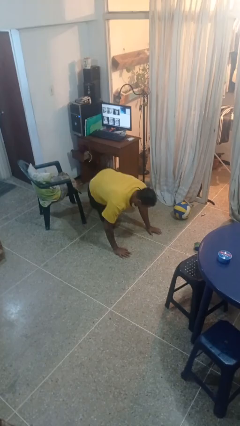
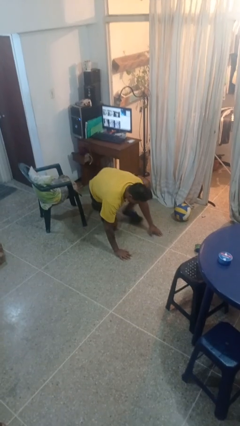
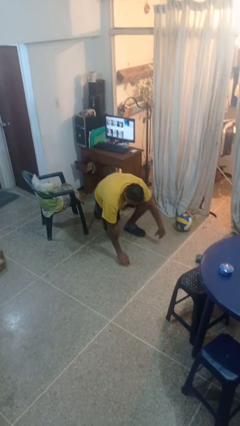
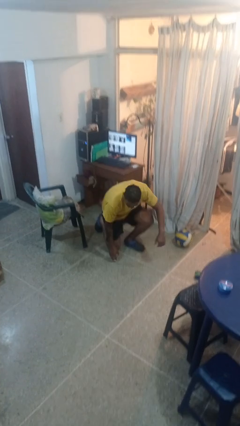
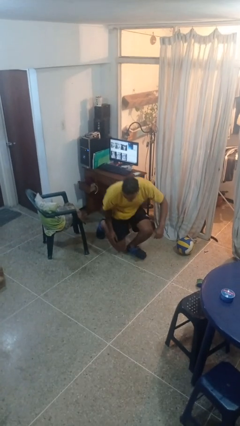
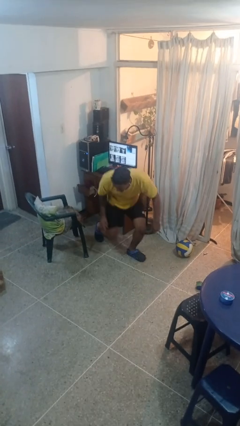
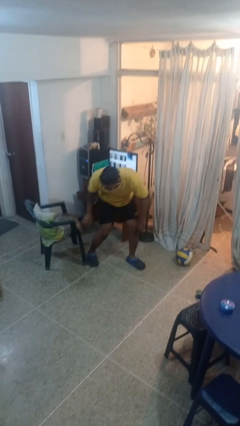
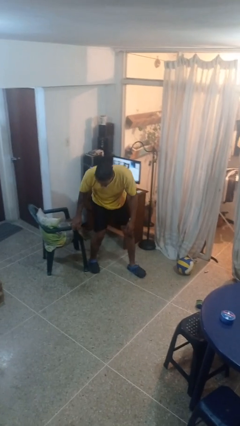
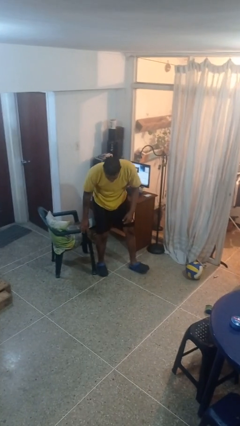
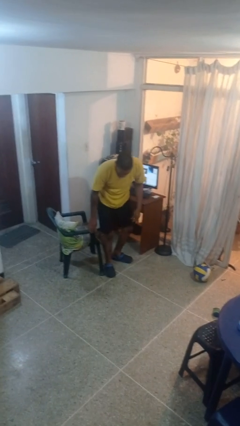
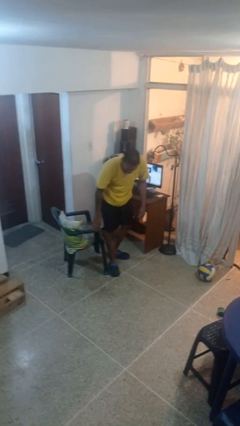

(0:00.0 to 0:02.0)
person stands up from floor

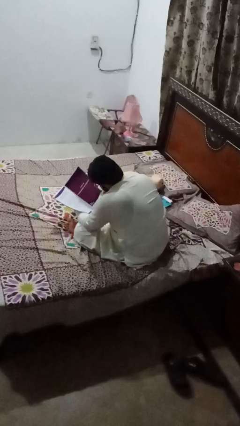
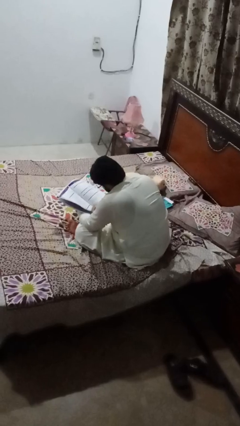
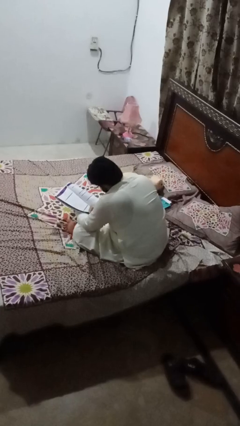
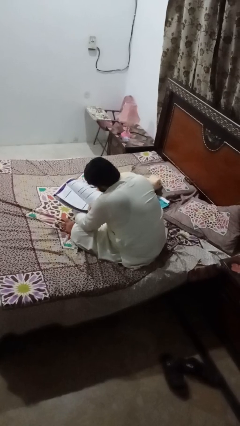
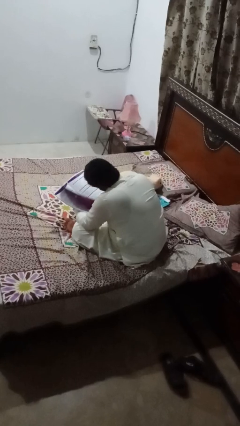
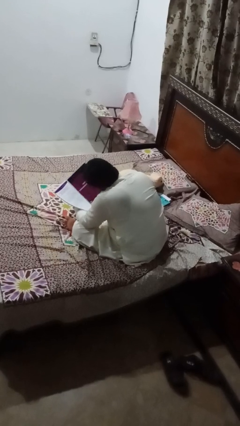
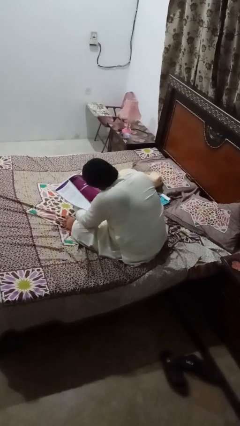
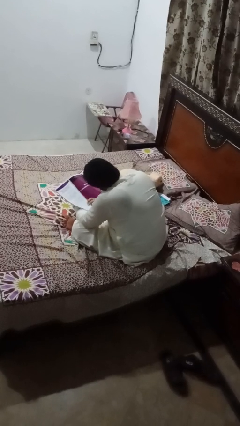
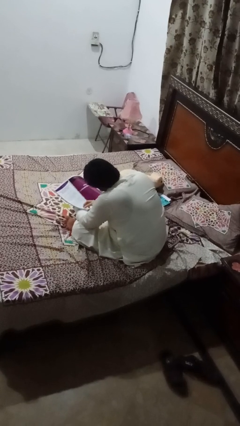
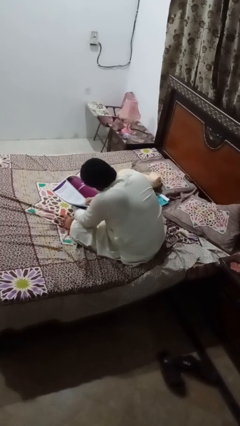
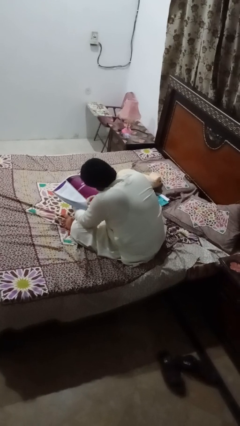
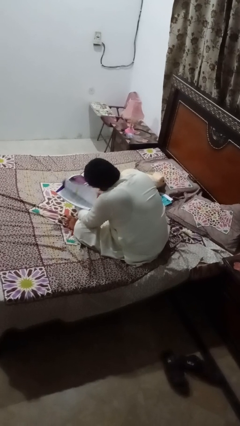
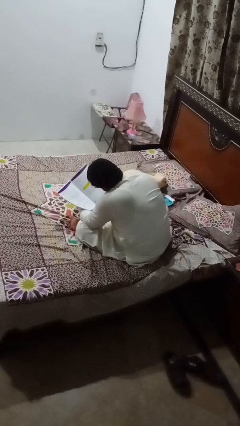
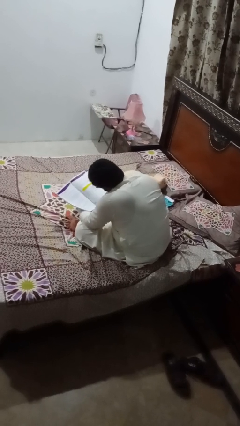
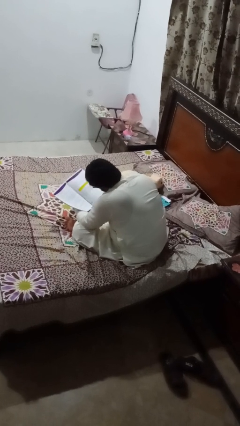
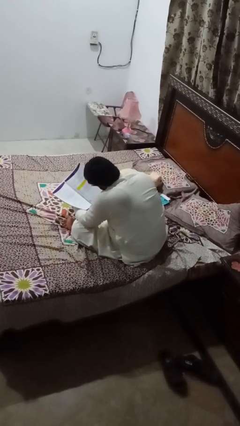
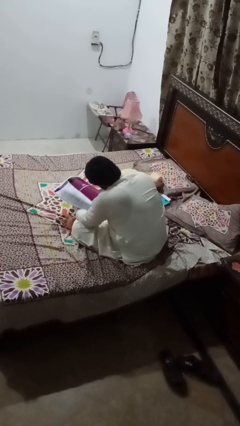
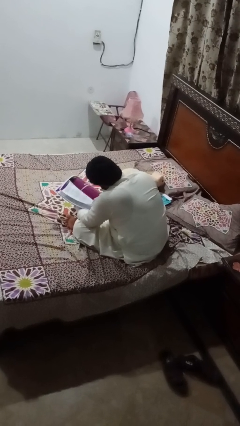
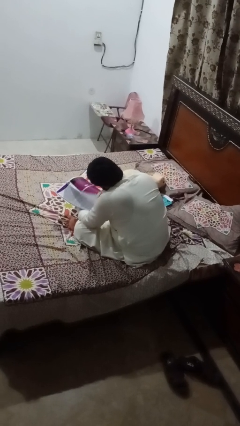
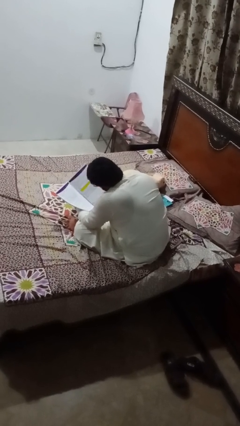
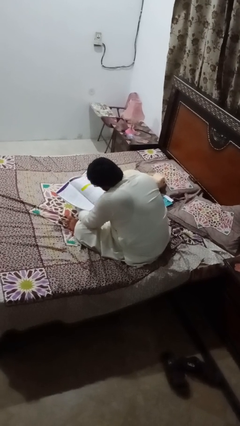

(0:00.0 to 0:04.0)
person reads book

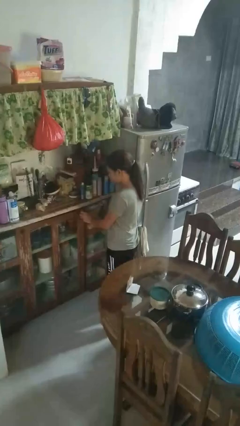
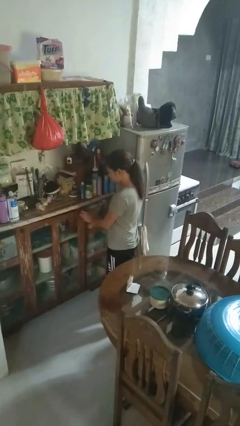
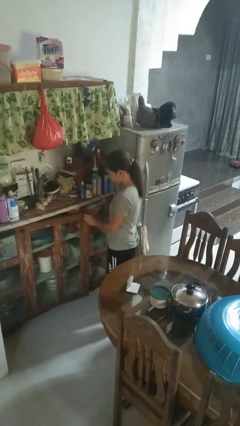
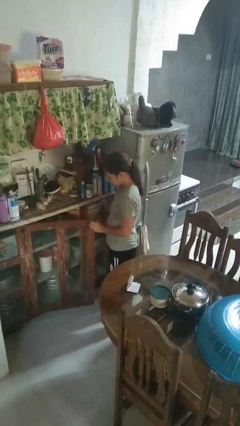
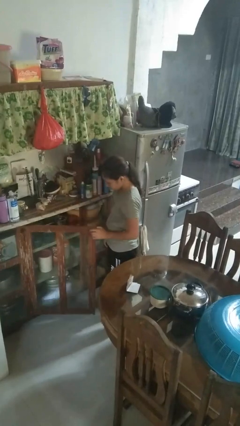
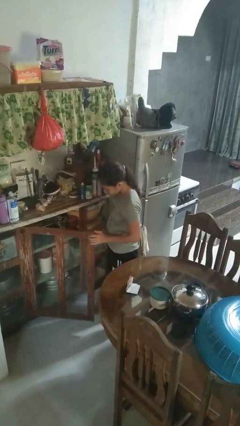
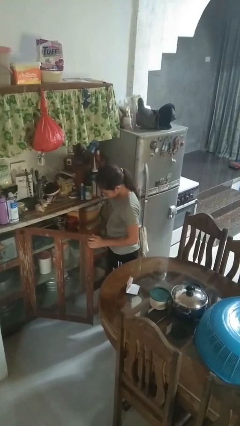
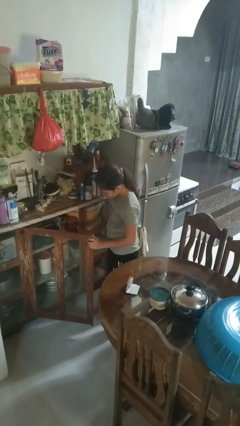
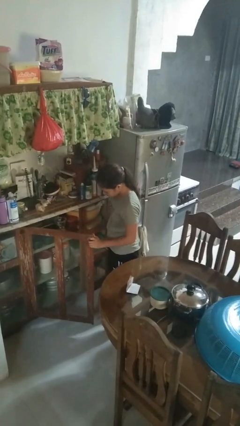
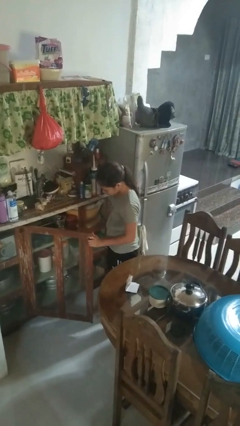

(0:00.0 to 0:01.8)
person opens cabinet

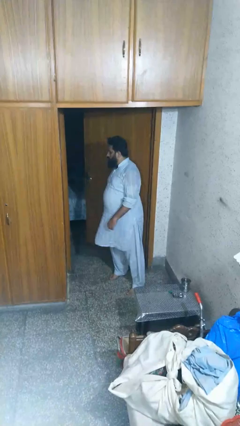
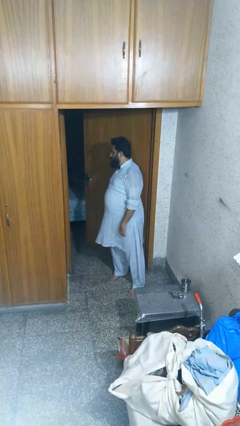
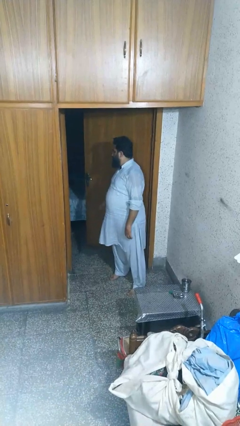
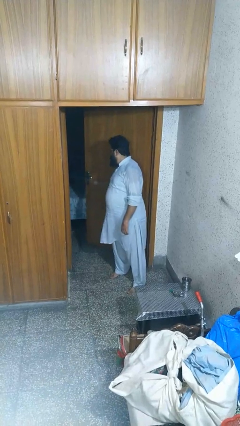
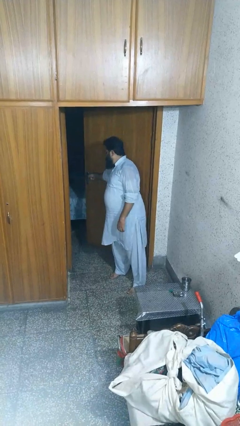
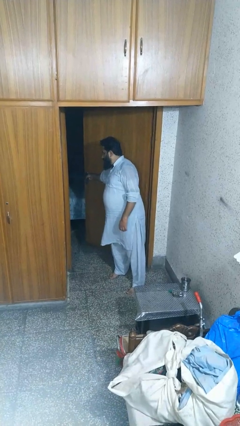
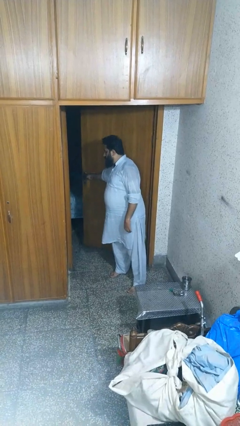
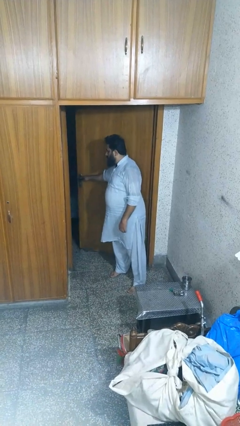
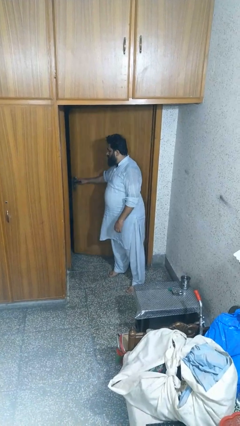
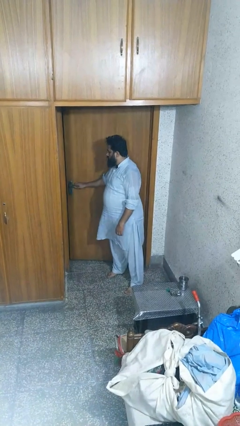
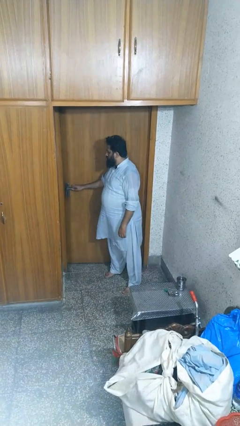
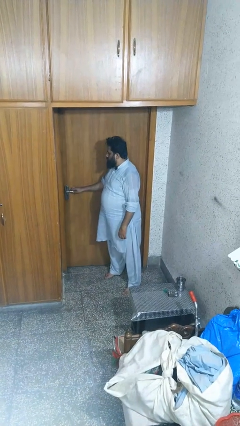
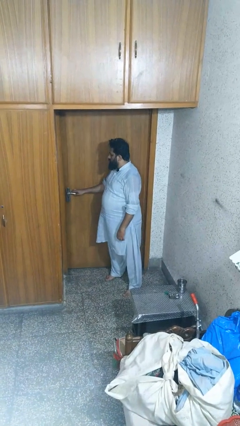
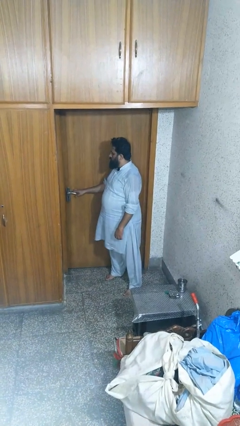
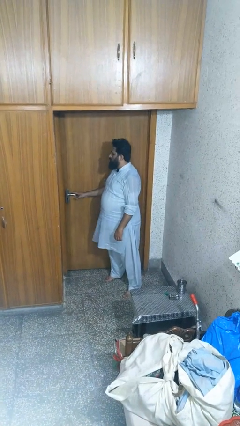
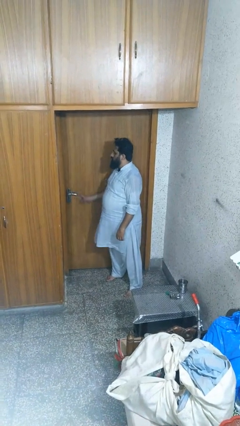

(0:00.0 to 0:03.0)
person closes door with hip

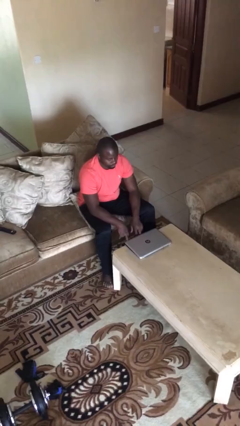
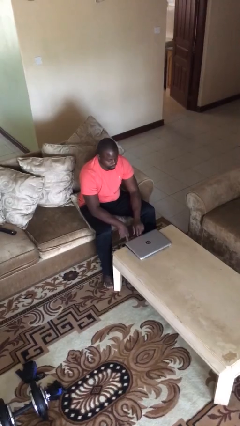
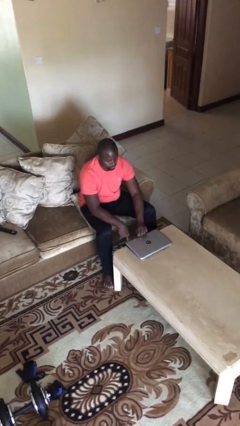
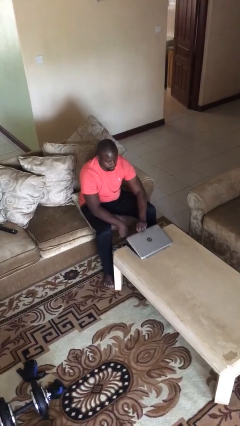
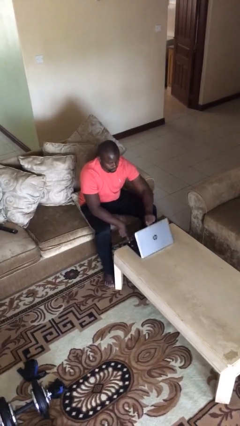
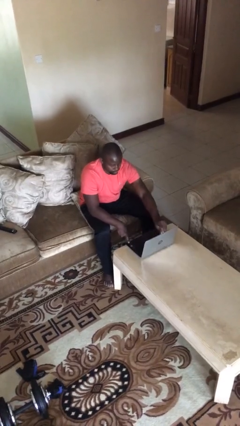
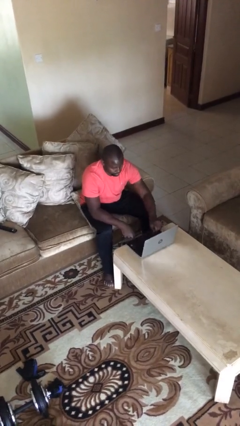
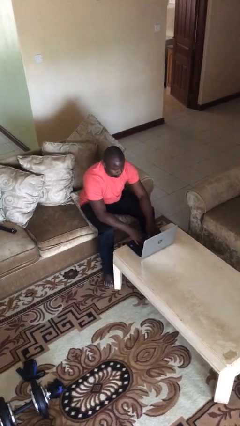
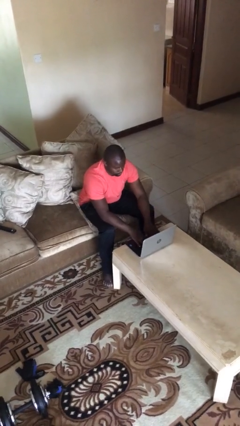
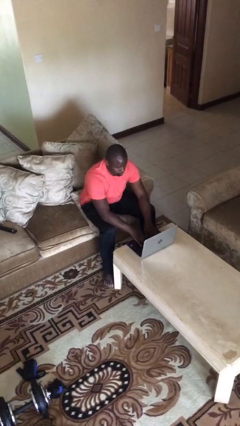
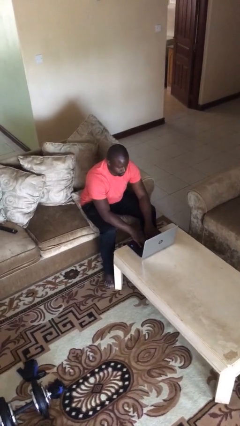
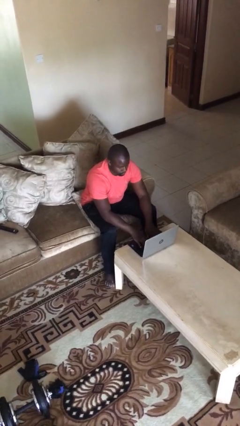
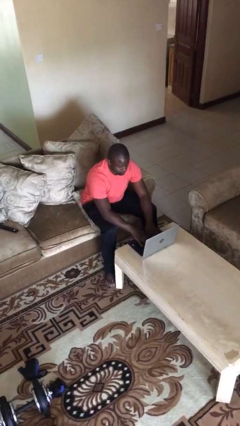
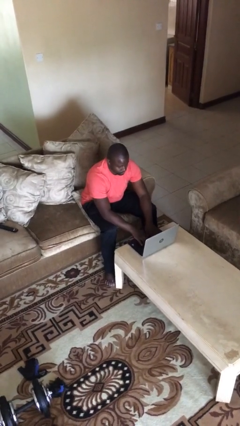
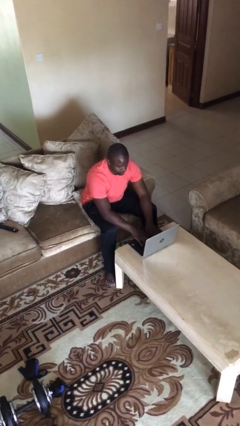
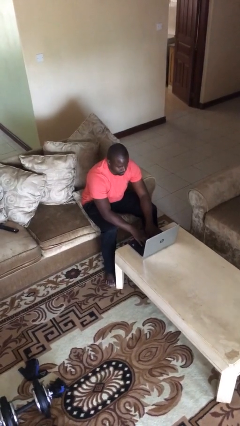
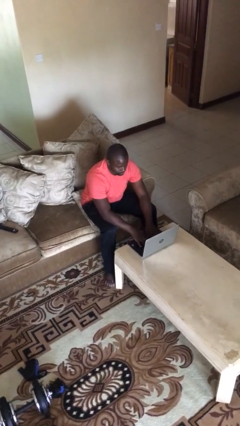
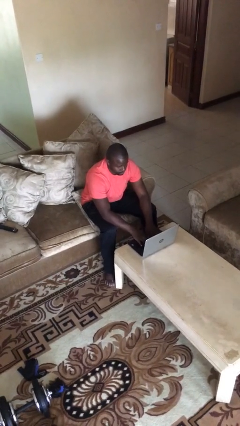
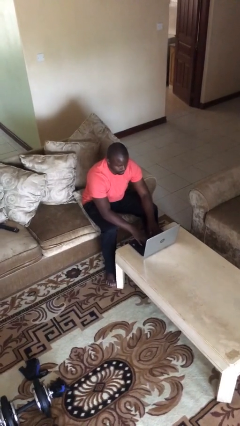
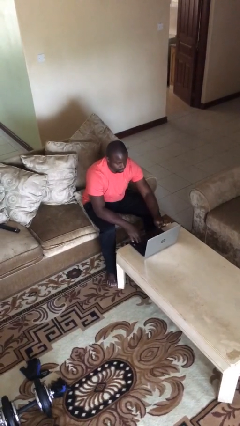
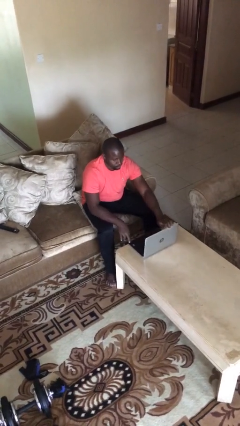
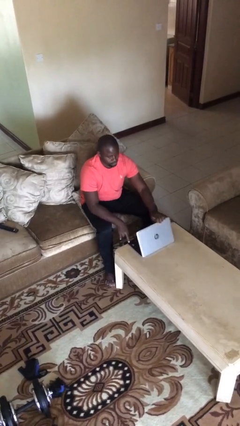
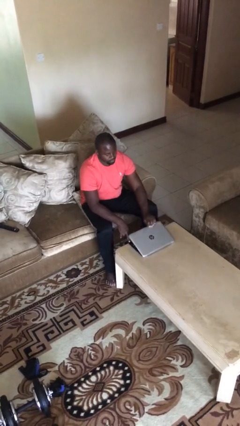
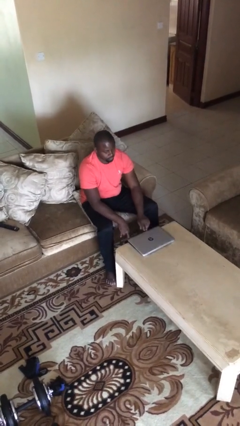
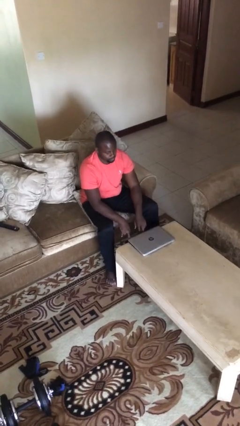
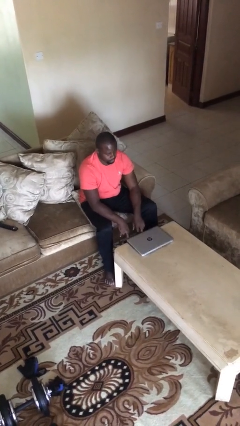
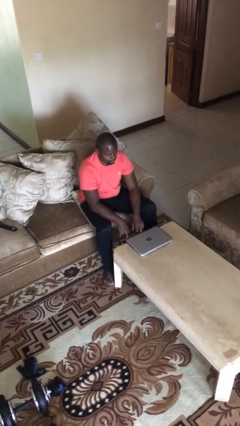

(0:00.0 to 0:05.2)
person interacts with laptop

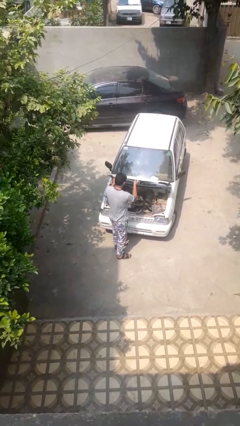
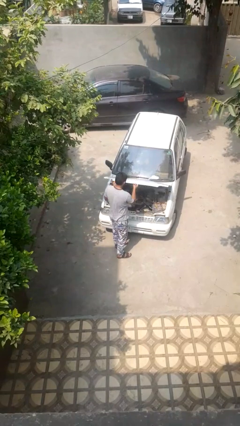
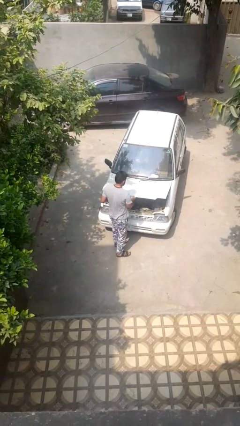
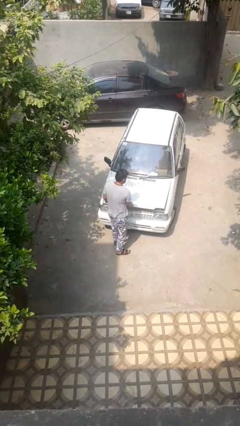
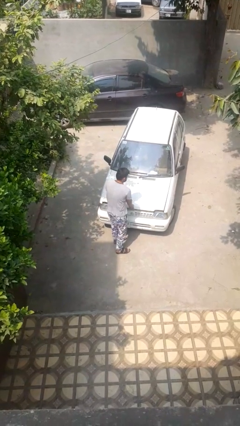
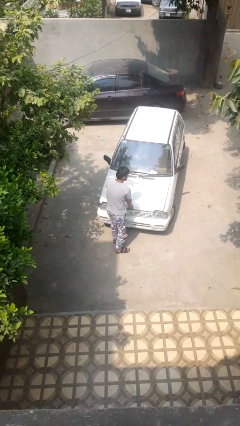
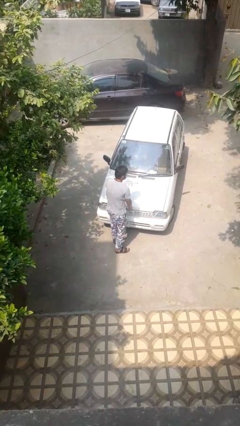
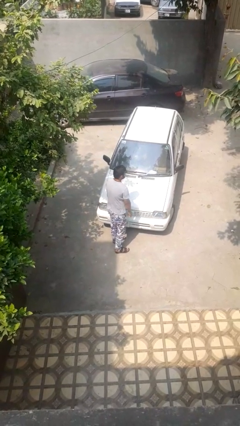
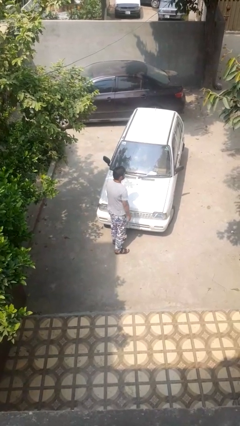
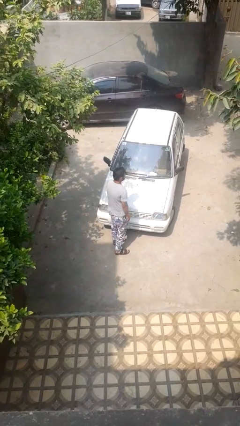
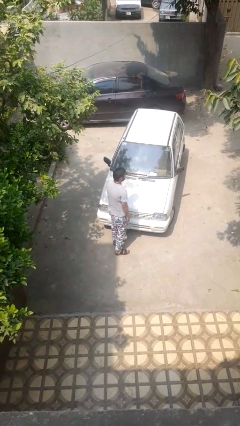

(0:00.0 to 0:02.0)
person closes car hood
